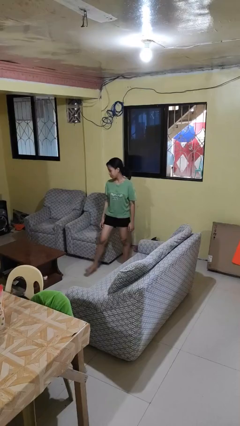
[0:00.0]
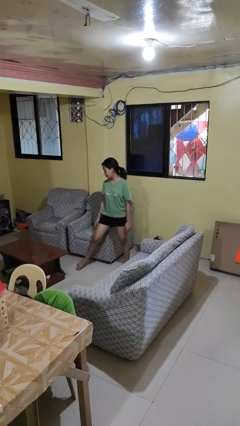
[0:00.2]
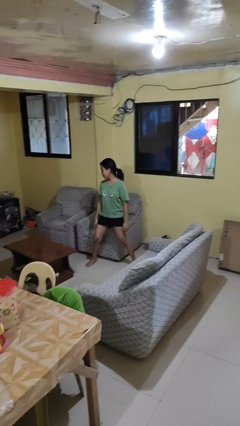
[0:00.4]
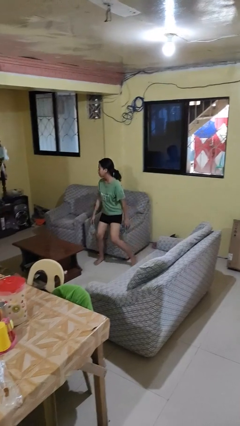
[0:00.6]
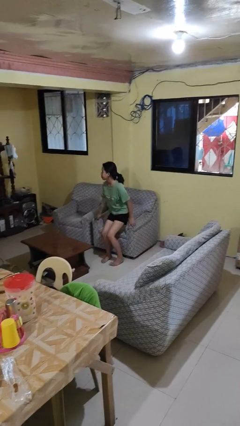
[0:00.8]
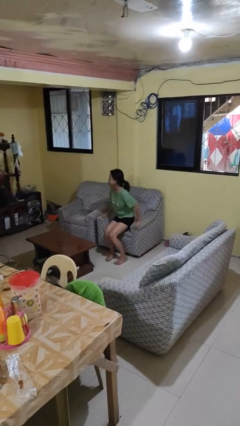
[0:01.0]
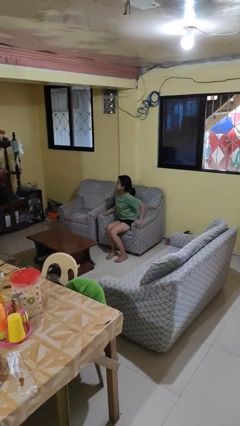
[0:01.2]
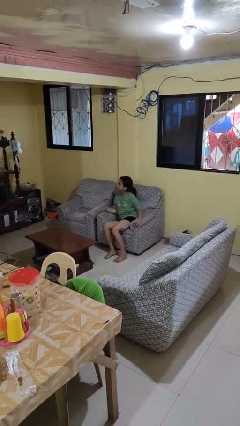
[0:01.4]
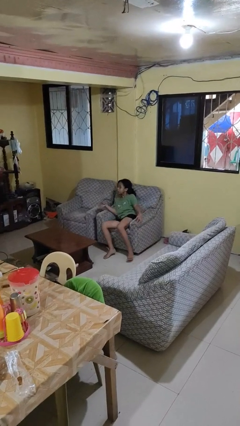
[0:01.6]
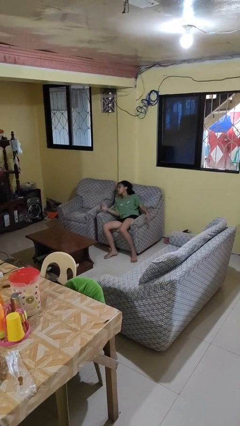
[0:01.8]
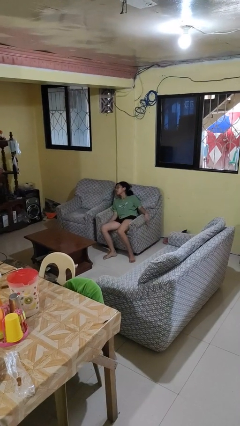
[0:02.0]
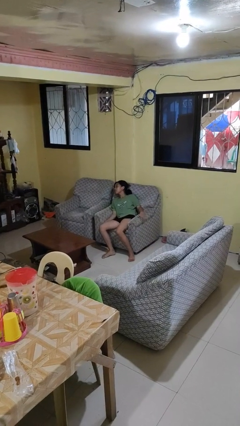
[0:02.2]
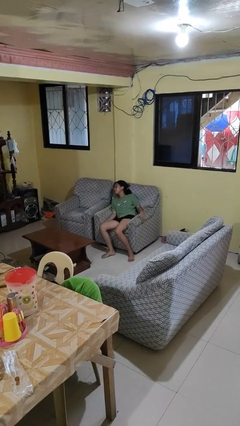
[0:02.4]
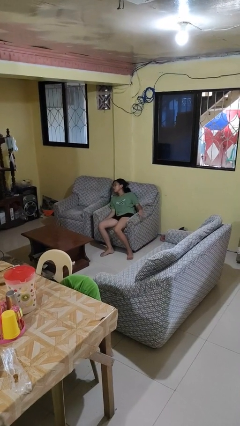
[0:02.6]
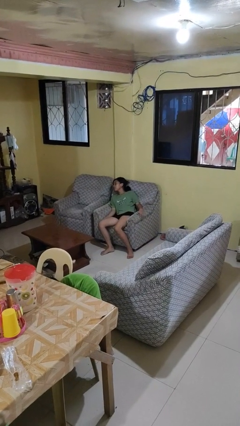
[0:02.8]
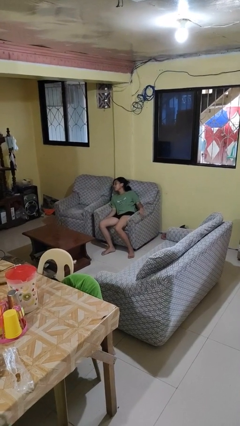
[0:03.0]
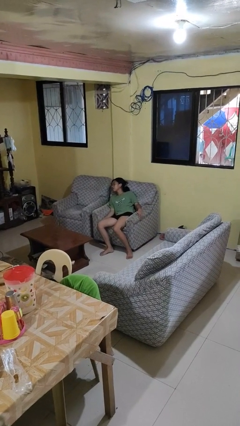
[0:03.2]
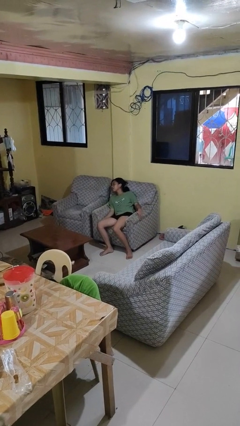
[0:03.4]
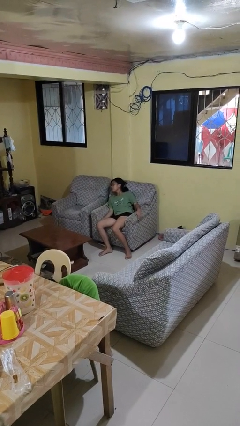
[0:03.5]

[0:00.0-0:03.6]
person lies down on couch

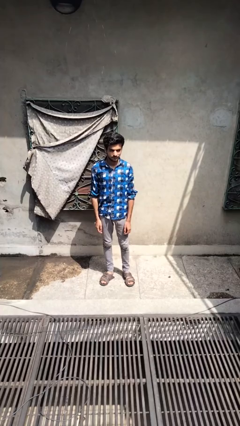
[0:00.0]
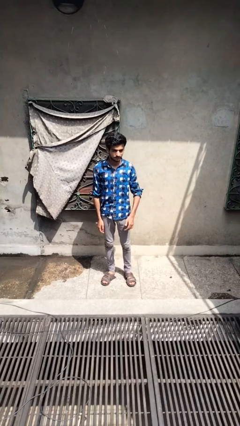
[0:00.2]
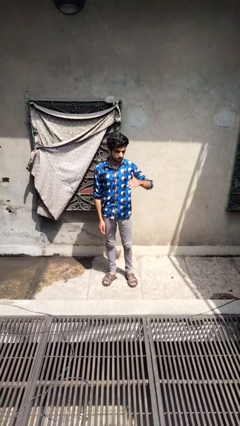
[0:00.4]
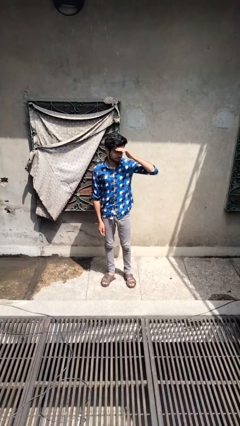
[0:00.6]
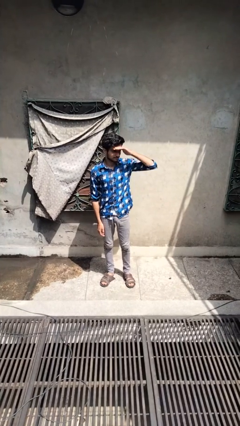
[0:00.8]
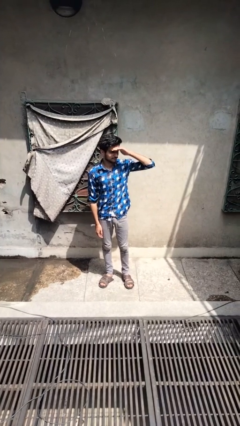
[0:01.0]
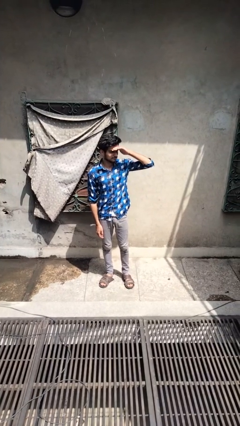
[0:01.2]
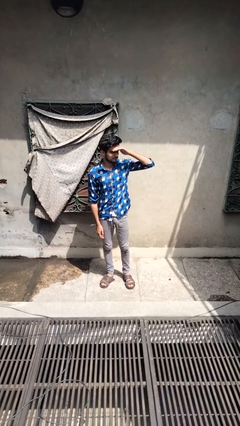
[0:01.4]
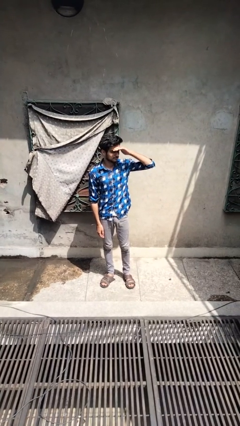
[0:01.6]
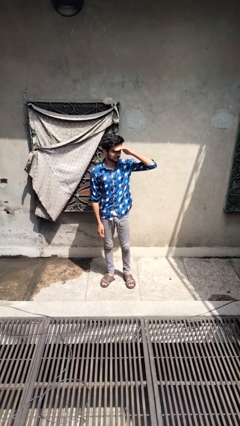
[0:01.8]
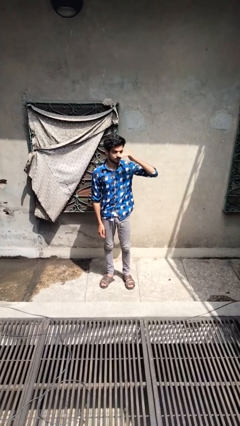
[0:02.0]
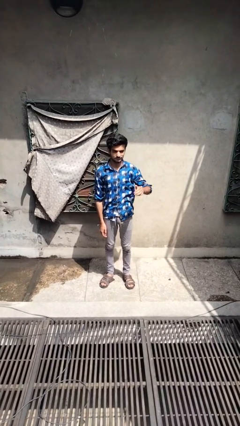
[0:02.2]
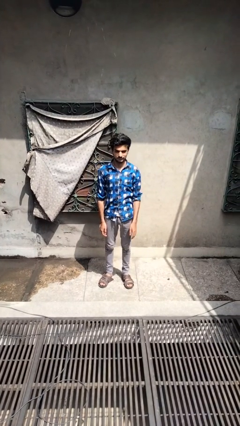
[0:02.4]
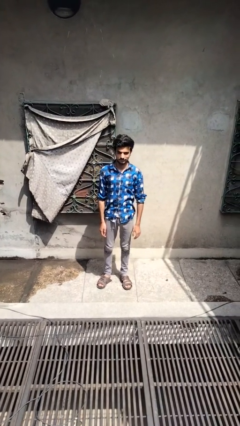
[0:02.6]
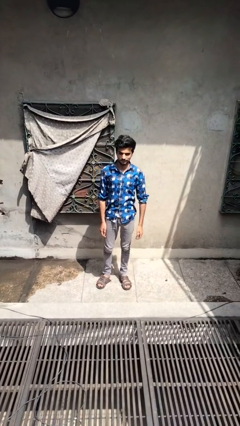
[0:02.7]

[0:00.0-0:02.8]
person shades eyes

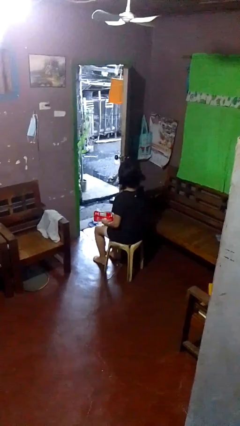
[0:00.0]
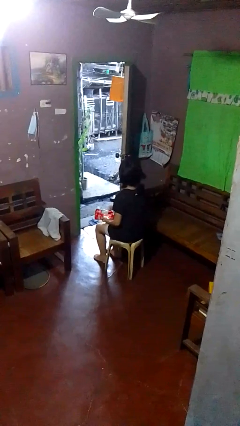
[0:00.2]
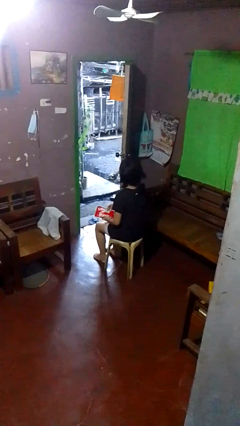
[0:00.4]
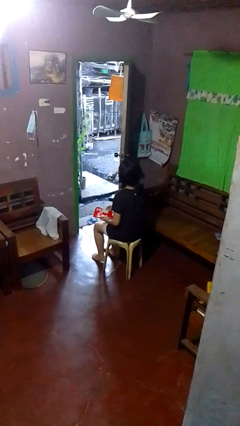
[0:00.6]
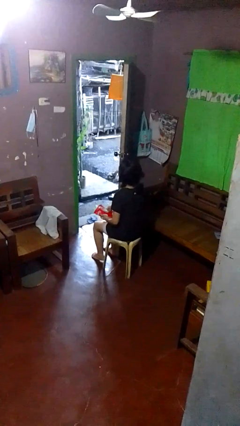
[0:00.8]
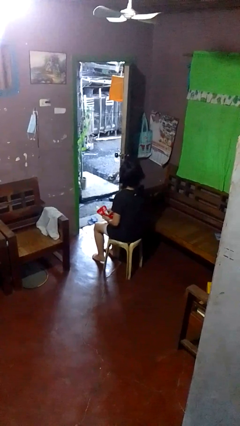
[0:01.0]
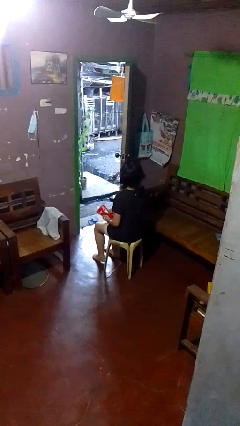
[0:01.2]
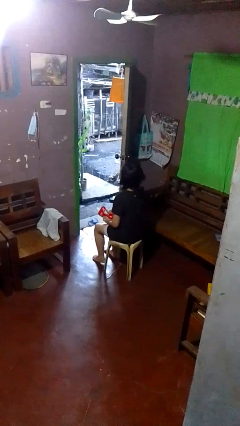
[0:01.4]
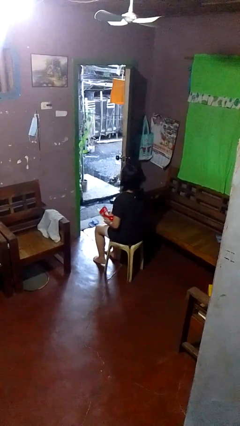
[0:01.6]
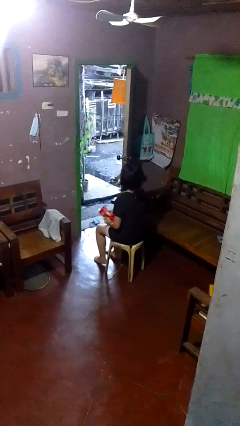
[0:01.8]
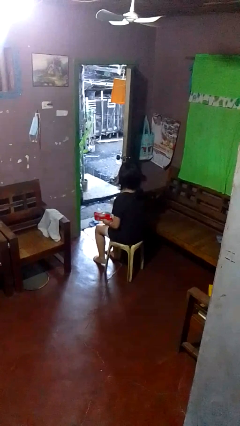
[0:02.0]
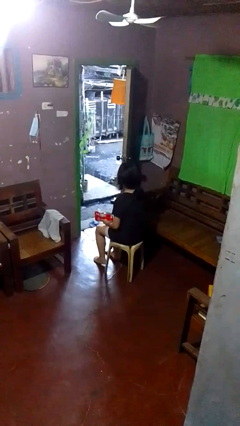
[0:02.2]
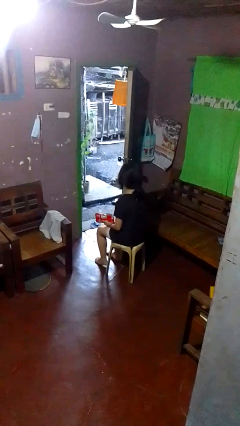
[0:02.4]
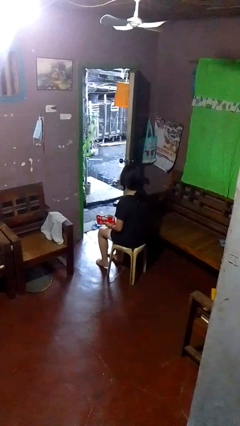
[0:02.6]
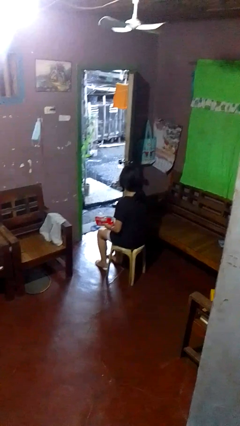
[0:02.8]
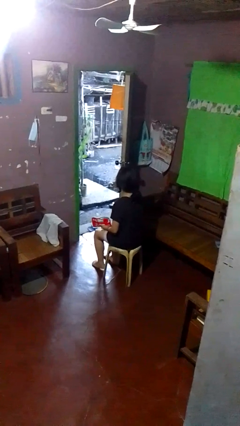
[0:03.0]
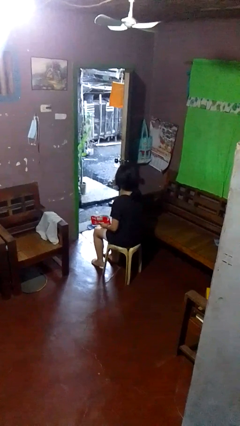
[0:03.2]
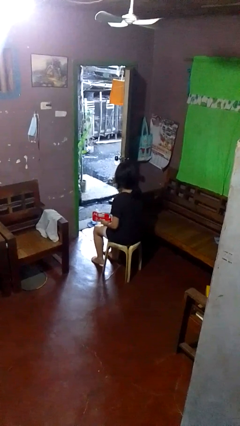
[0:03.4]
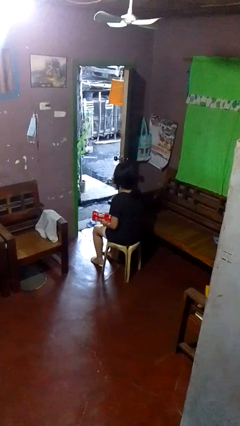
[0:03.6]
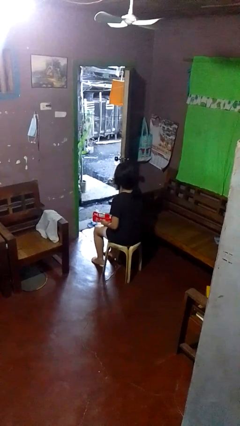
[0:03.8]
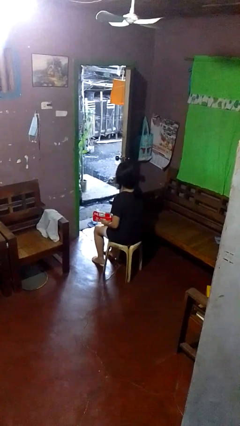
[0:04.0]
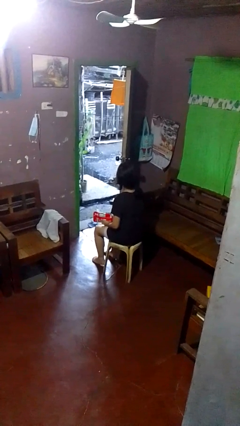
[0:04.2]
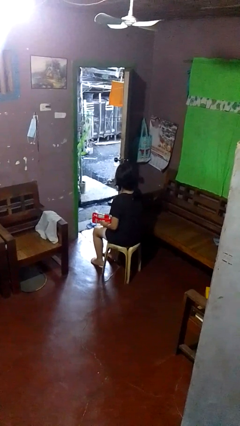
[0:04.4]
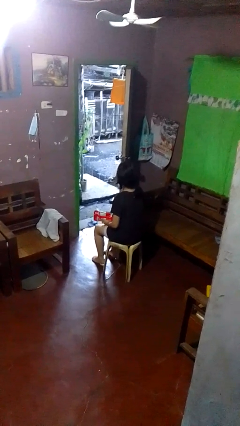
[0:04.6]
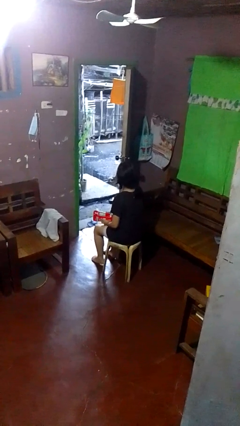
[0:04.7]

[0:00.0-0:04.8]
person eats snack from bag

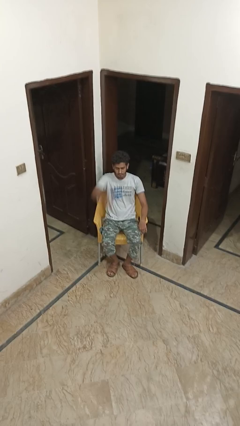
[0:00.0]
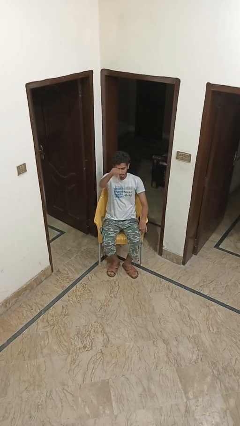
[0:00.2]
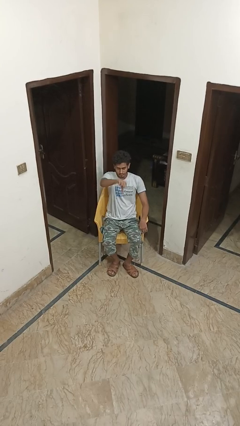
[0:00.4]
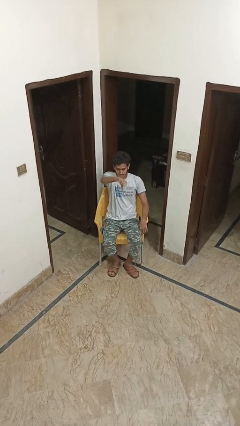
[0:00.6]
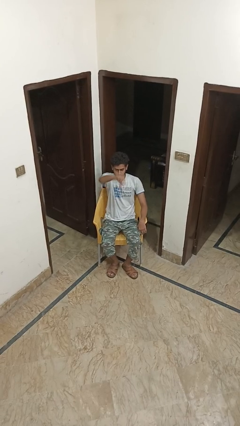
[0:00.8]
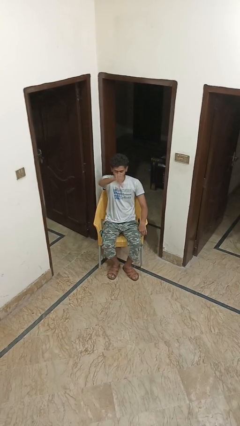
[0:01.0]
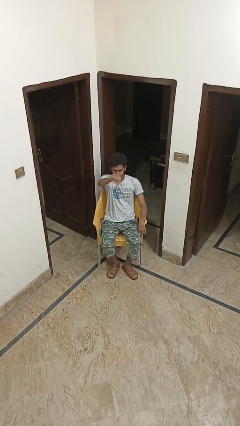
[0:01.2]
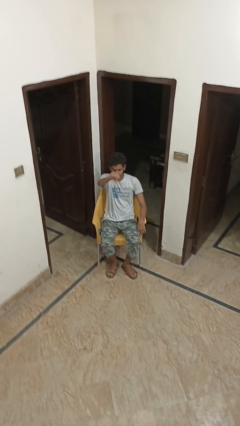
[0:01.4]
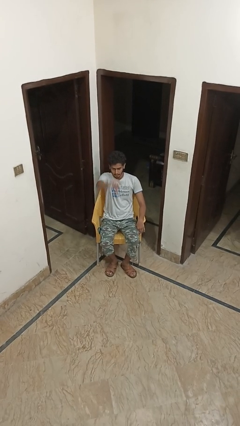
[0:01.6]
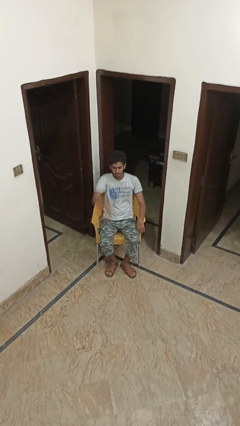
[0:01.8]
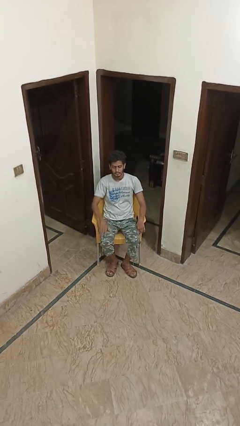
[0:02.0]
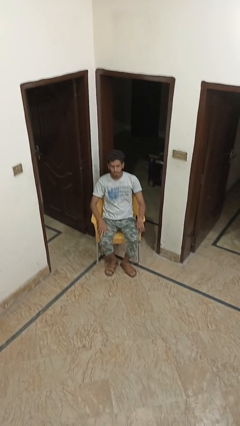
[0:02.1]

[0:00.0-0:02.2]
person gestures thumbs down

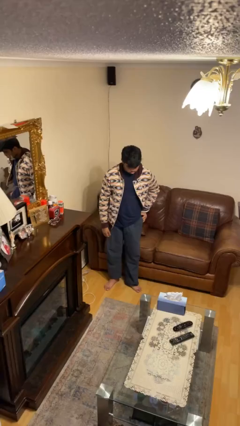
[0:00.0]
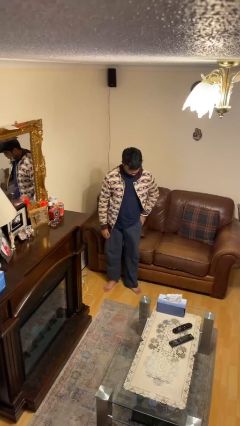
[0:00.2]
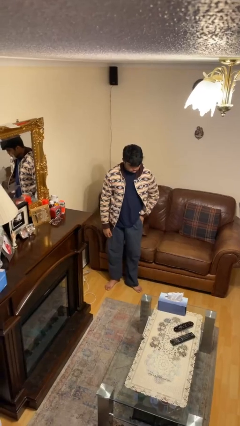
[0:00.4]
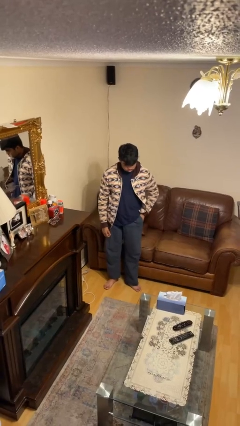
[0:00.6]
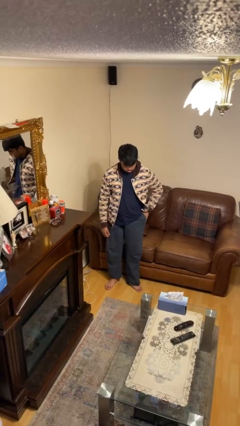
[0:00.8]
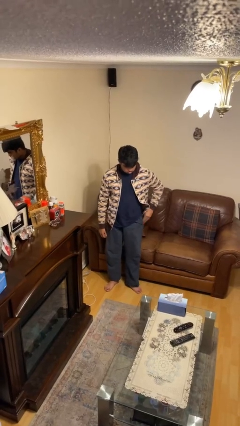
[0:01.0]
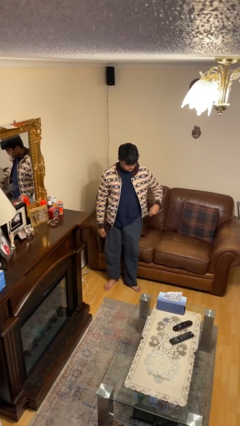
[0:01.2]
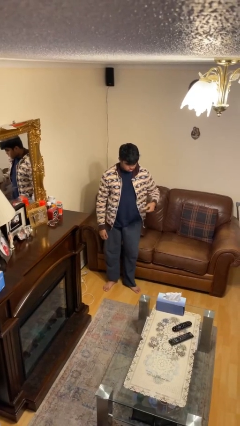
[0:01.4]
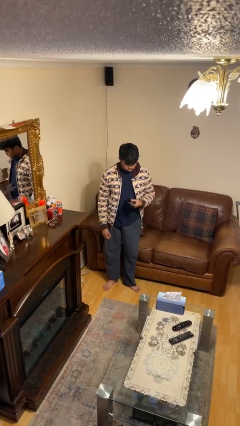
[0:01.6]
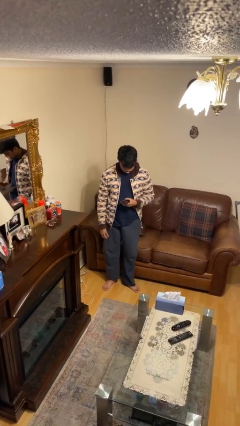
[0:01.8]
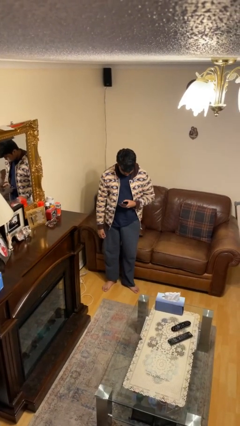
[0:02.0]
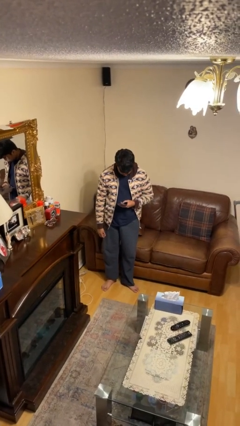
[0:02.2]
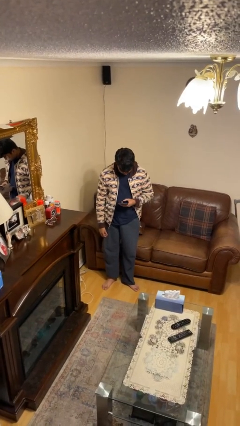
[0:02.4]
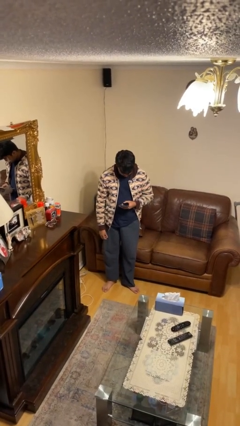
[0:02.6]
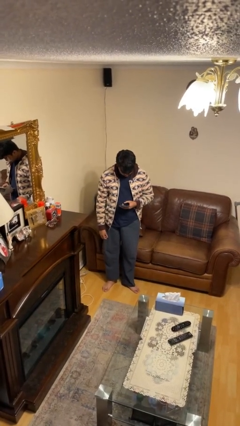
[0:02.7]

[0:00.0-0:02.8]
person takes phone from pocket

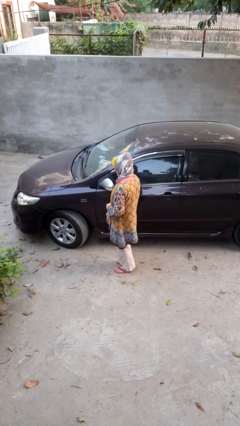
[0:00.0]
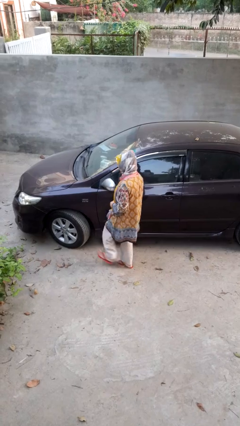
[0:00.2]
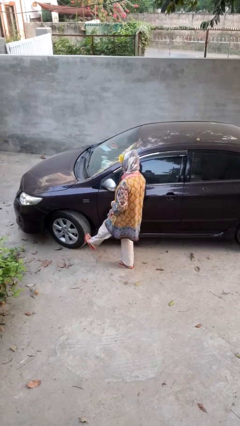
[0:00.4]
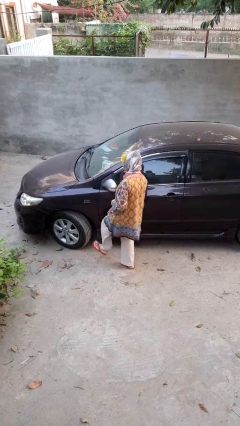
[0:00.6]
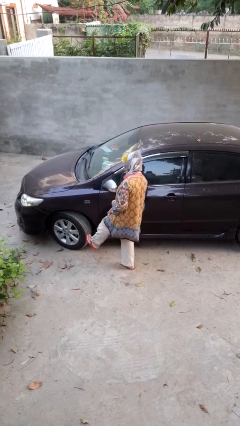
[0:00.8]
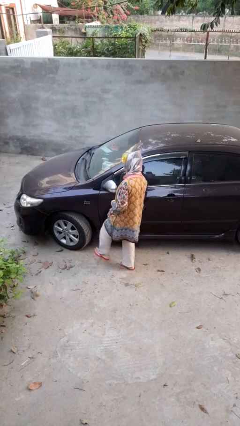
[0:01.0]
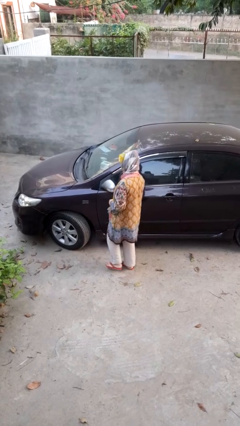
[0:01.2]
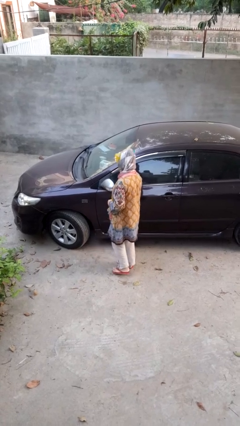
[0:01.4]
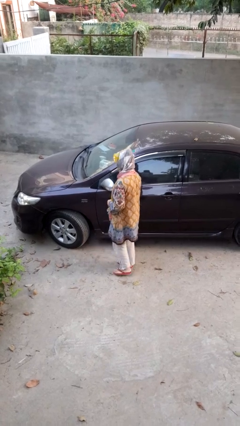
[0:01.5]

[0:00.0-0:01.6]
person kicks car tires
